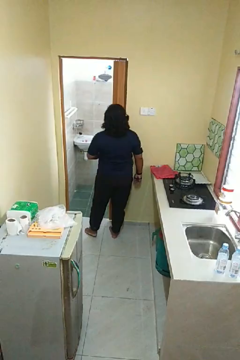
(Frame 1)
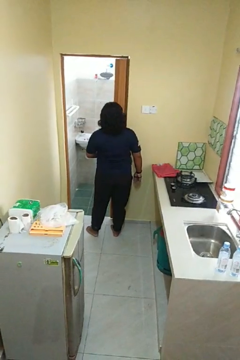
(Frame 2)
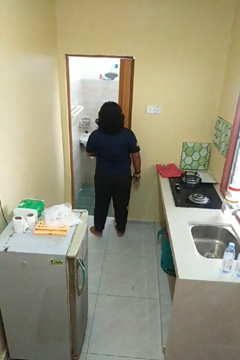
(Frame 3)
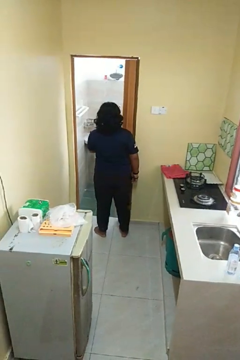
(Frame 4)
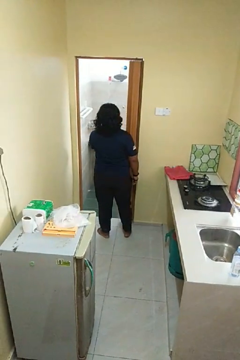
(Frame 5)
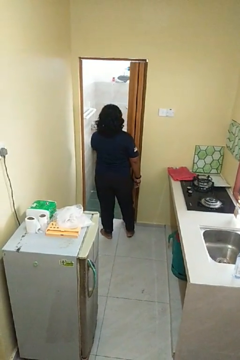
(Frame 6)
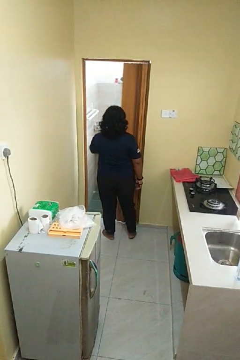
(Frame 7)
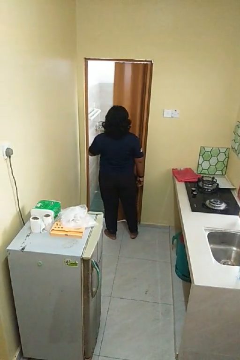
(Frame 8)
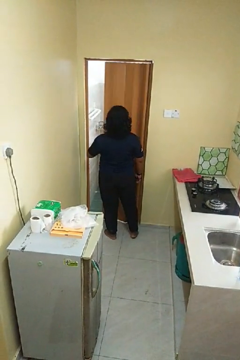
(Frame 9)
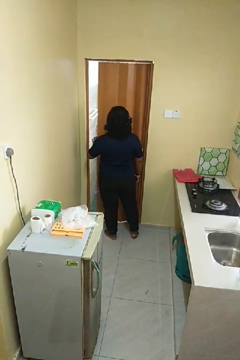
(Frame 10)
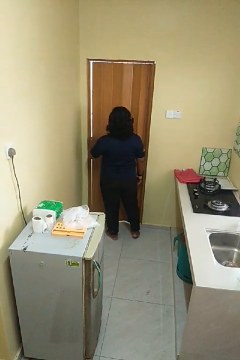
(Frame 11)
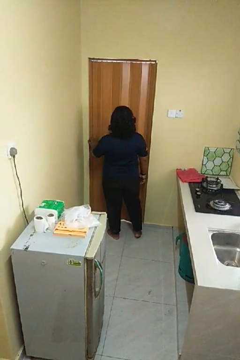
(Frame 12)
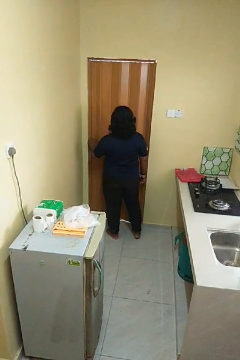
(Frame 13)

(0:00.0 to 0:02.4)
person closes sliding door

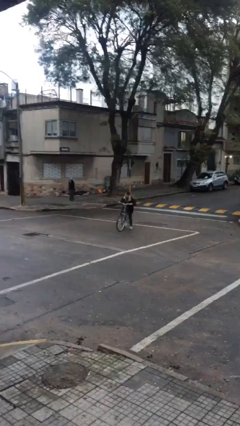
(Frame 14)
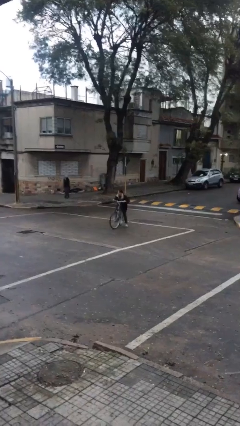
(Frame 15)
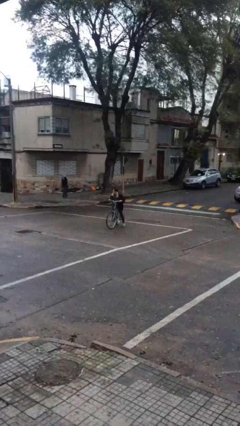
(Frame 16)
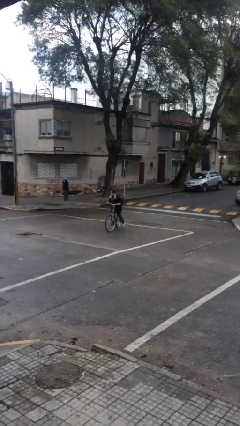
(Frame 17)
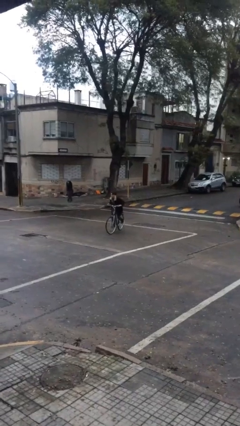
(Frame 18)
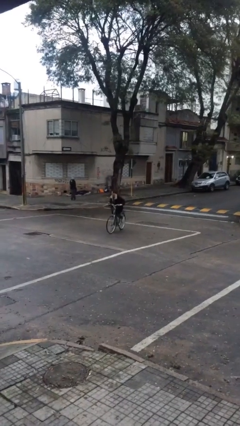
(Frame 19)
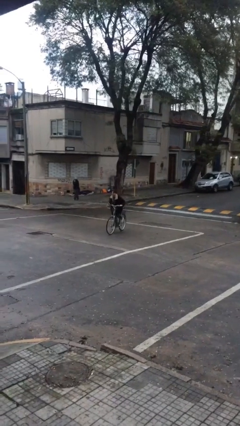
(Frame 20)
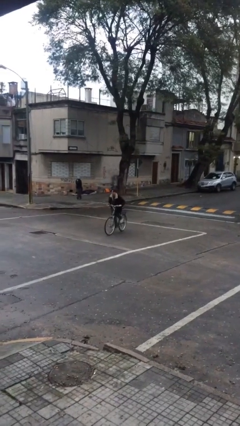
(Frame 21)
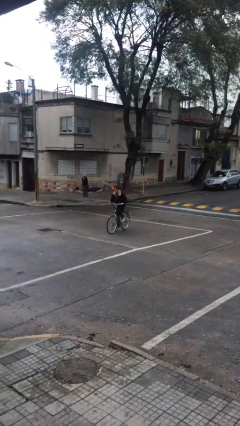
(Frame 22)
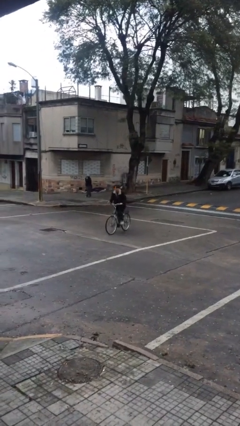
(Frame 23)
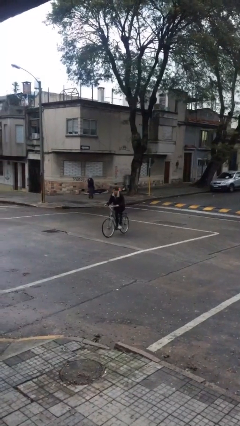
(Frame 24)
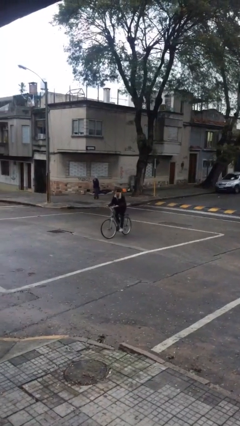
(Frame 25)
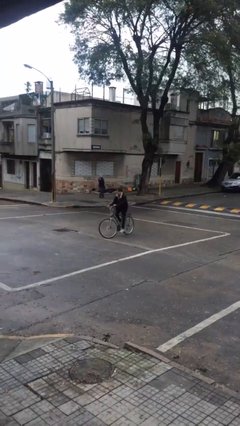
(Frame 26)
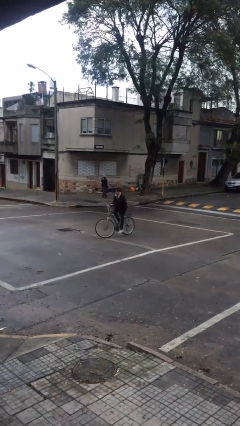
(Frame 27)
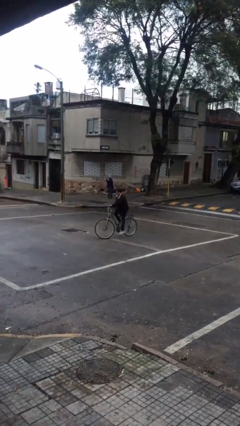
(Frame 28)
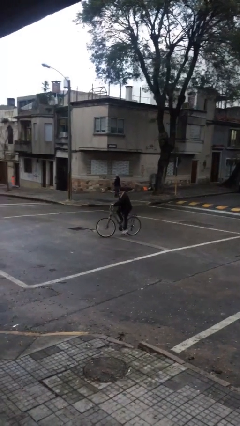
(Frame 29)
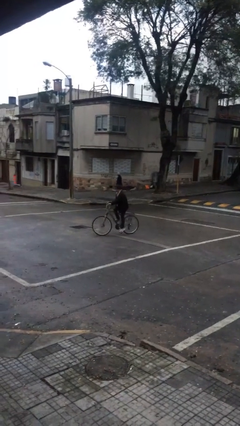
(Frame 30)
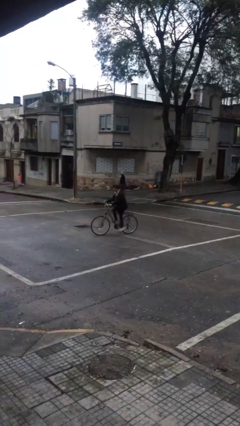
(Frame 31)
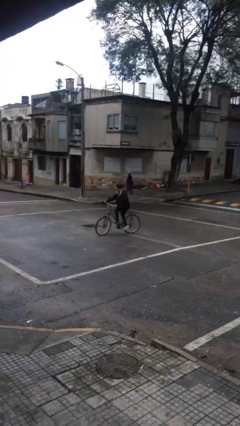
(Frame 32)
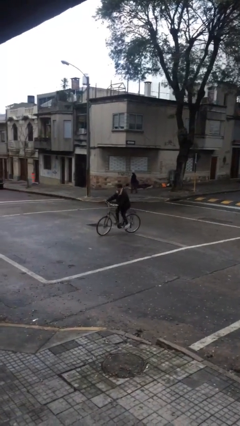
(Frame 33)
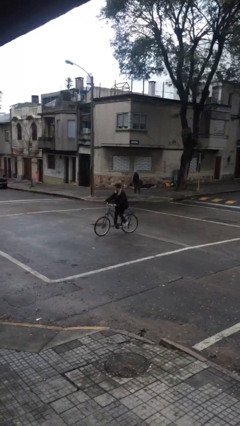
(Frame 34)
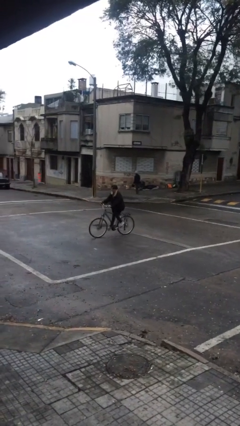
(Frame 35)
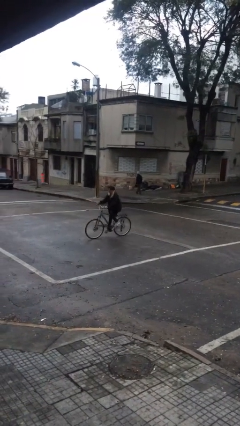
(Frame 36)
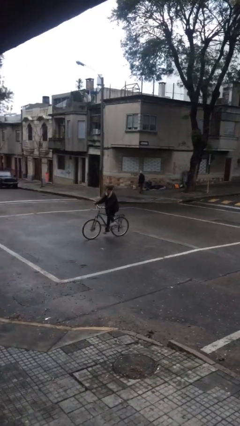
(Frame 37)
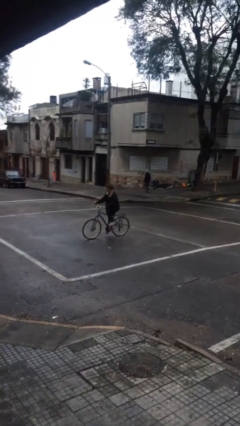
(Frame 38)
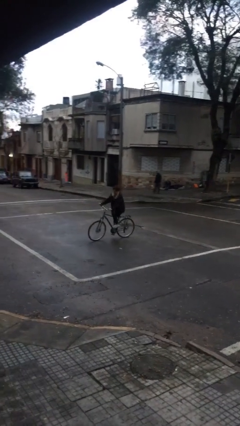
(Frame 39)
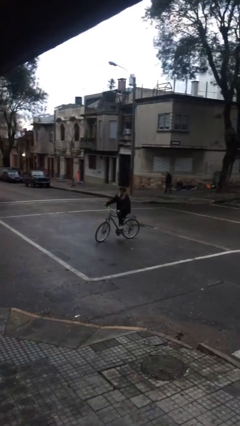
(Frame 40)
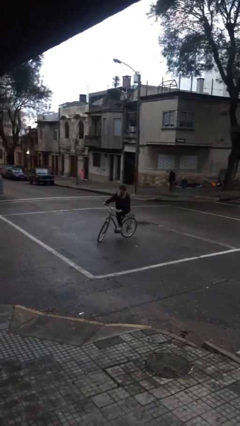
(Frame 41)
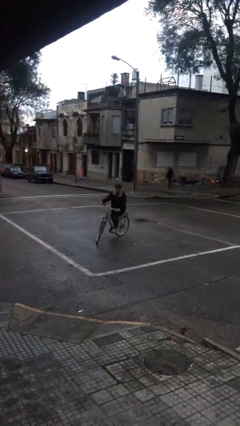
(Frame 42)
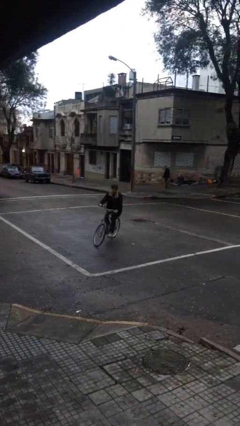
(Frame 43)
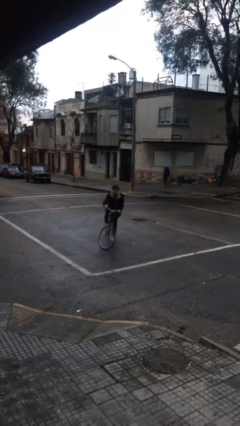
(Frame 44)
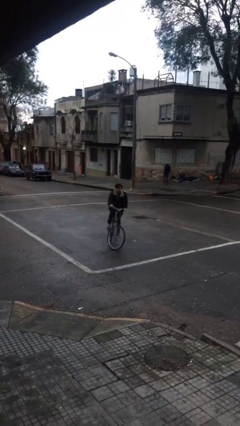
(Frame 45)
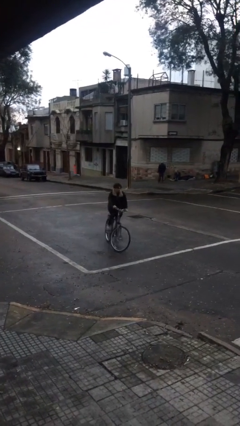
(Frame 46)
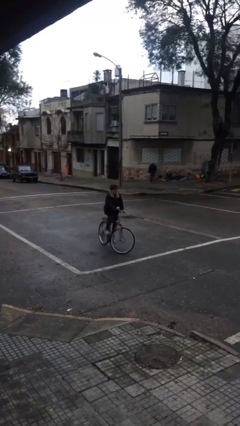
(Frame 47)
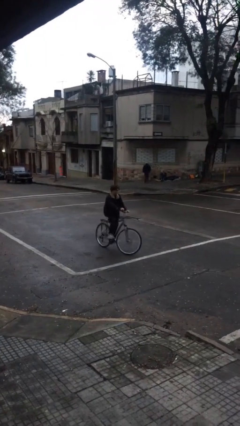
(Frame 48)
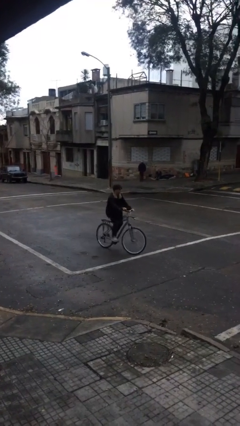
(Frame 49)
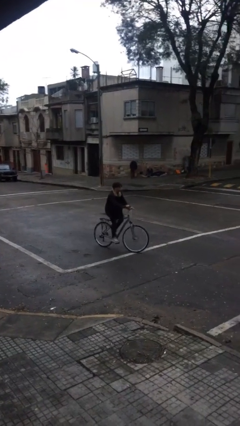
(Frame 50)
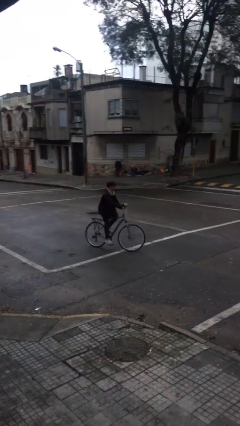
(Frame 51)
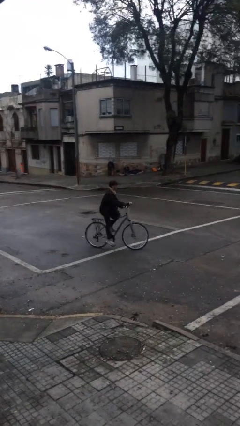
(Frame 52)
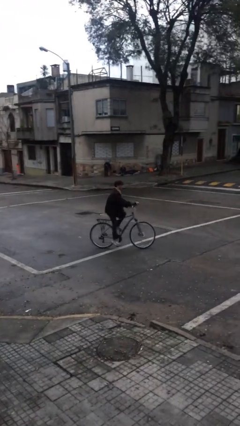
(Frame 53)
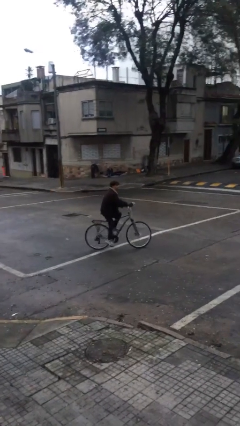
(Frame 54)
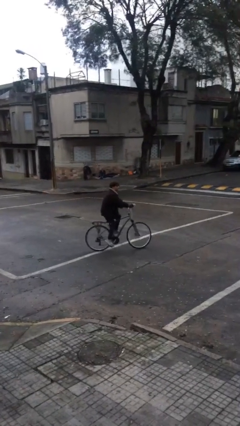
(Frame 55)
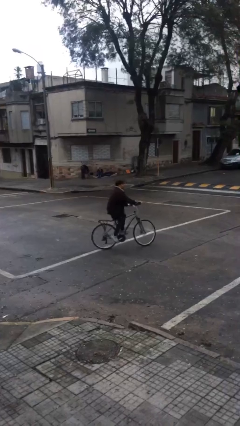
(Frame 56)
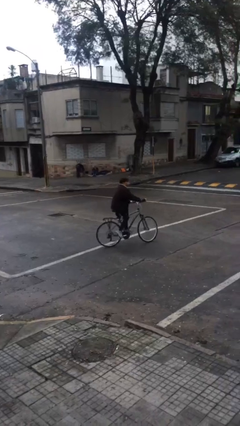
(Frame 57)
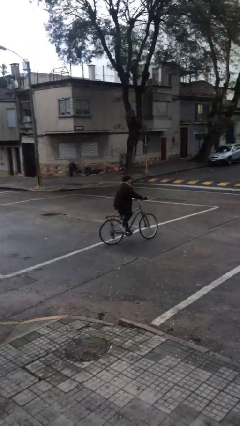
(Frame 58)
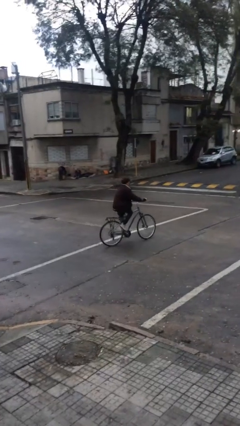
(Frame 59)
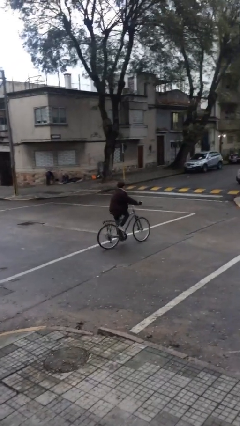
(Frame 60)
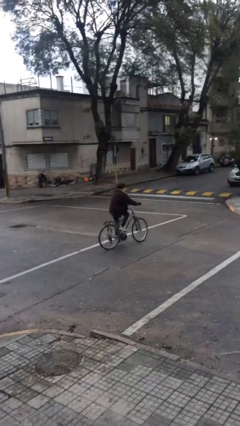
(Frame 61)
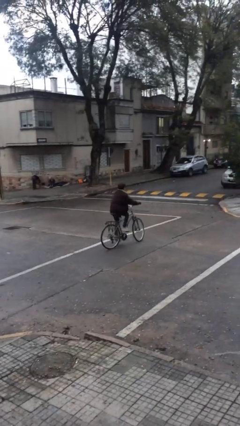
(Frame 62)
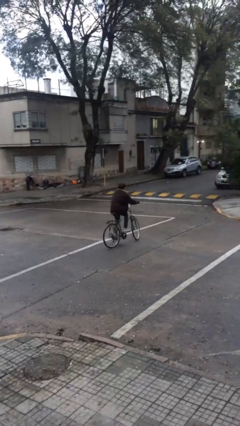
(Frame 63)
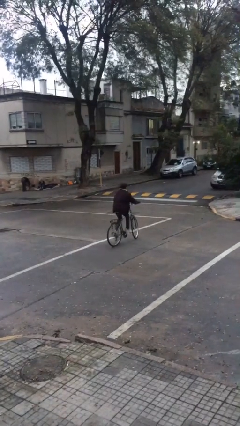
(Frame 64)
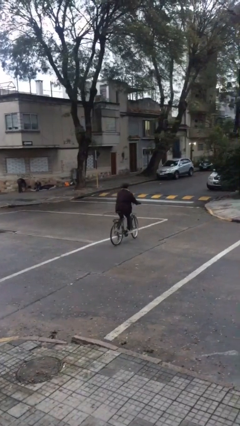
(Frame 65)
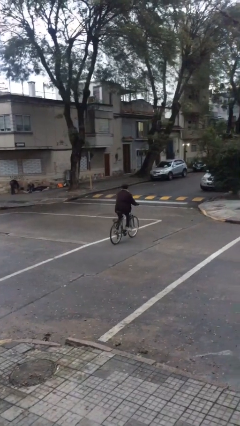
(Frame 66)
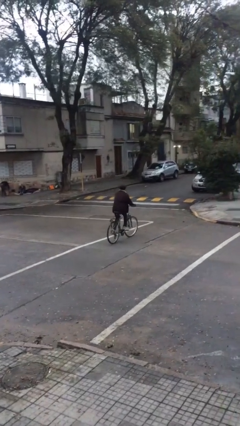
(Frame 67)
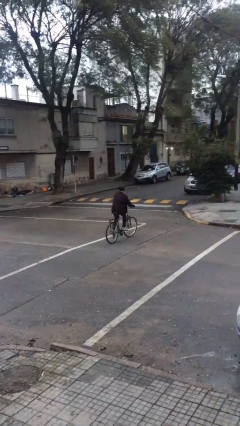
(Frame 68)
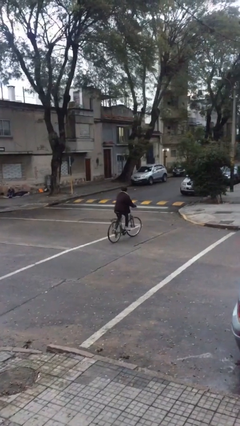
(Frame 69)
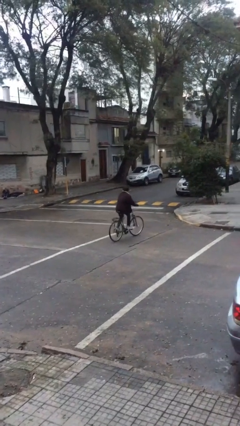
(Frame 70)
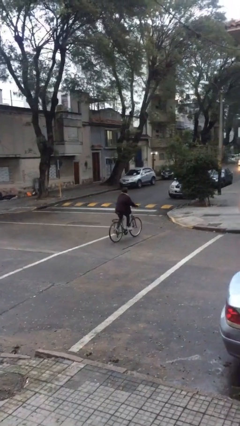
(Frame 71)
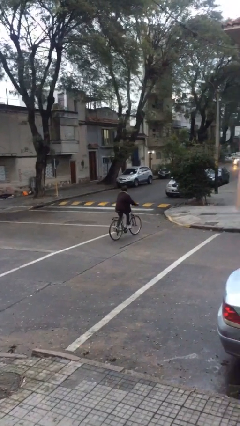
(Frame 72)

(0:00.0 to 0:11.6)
person rides bicycle

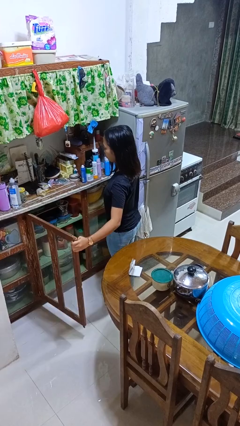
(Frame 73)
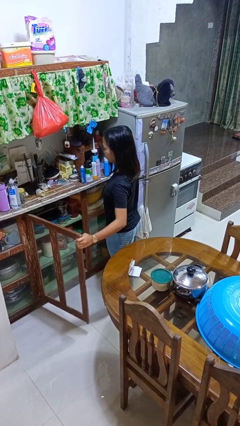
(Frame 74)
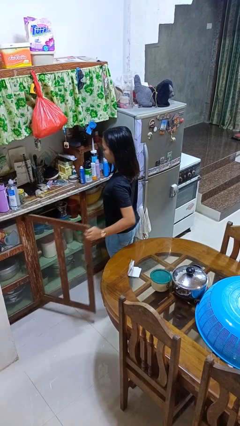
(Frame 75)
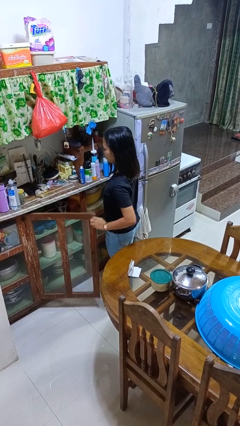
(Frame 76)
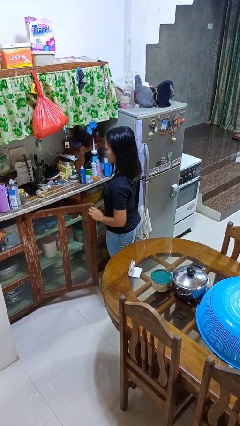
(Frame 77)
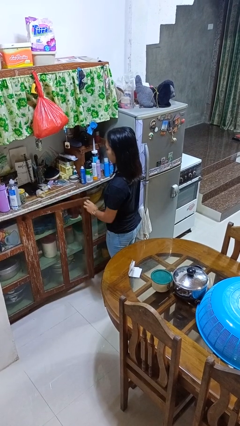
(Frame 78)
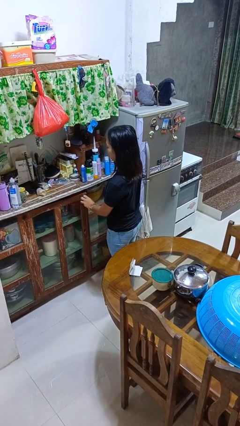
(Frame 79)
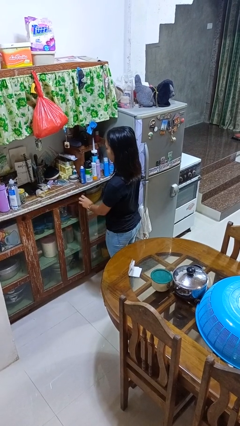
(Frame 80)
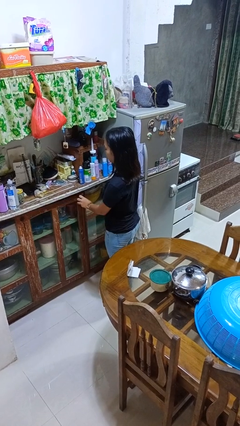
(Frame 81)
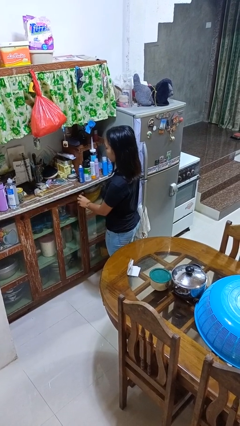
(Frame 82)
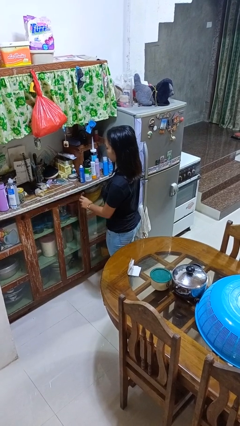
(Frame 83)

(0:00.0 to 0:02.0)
person closes cabinet

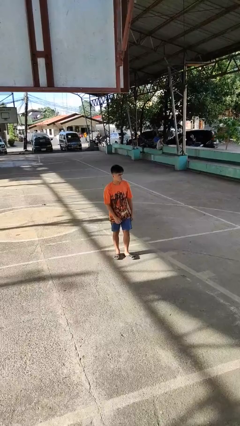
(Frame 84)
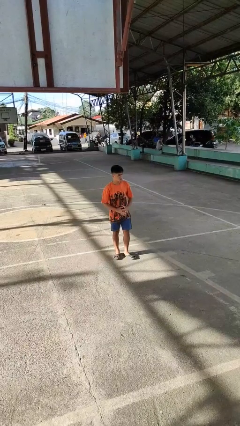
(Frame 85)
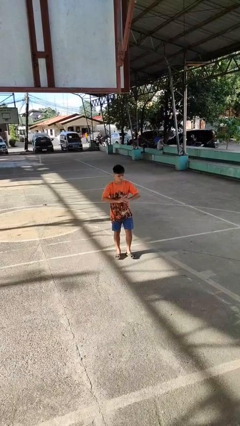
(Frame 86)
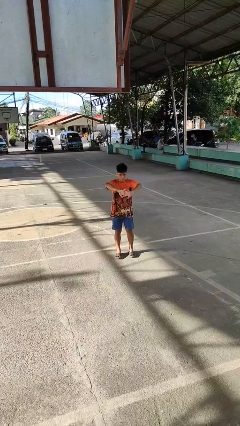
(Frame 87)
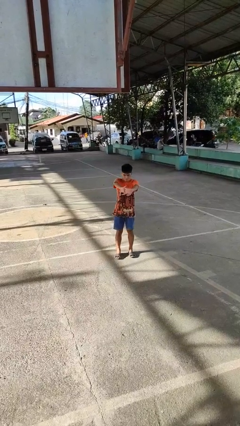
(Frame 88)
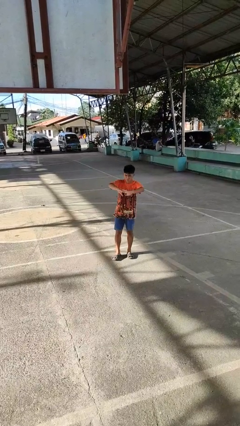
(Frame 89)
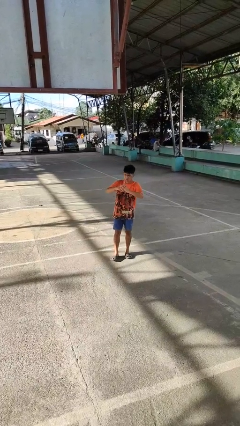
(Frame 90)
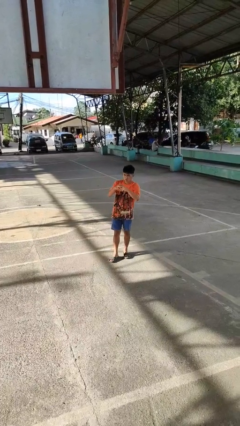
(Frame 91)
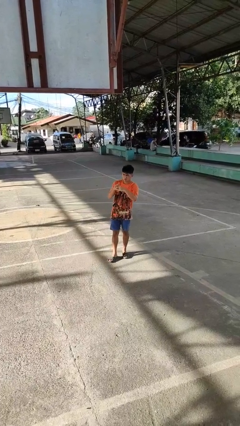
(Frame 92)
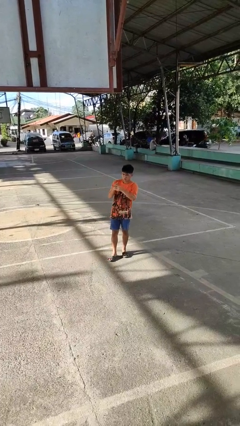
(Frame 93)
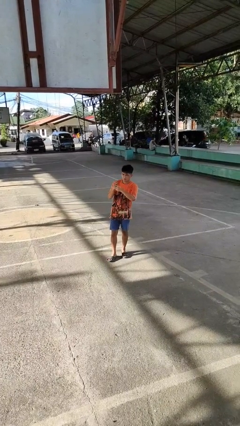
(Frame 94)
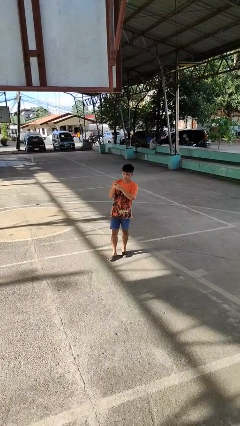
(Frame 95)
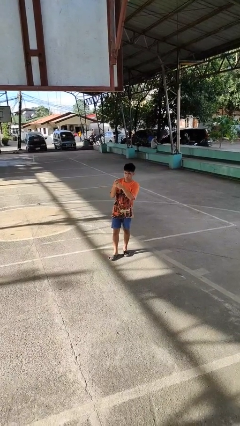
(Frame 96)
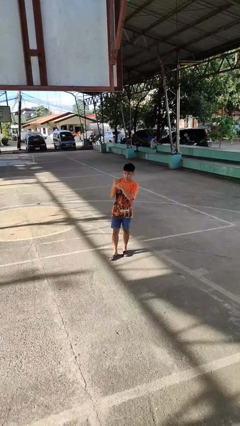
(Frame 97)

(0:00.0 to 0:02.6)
person cracks knuckles
